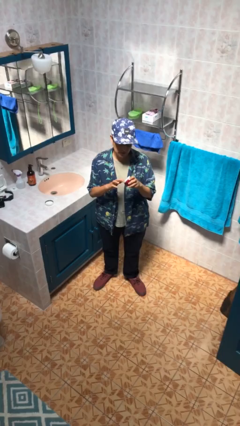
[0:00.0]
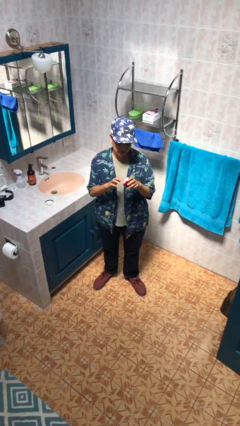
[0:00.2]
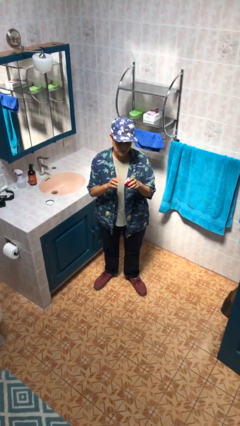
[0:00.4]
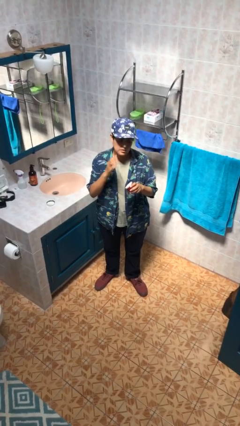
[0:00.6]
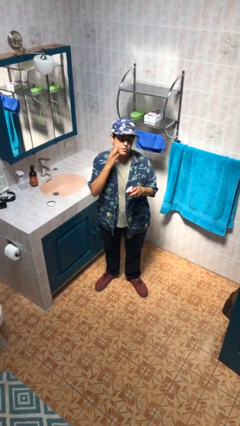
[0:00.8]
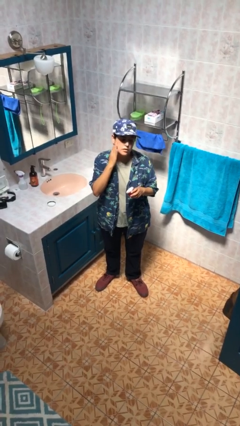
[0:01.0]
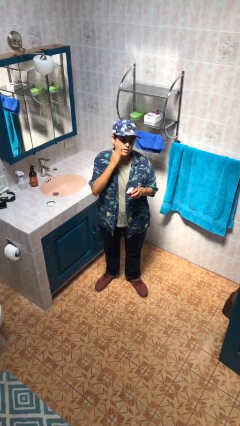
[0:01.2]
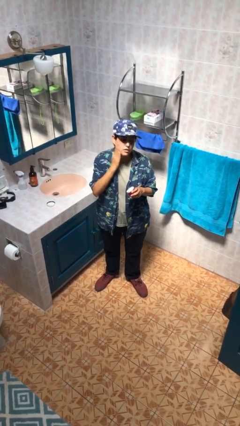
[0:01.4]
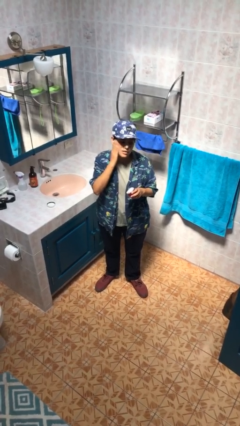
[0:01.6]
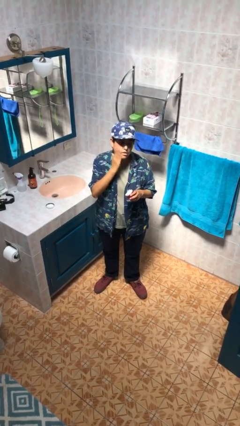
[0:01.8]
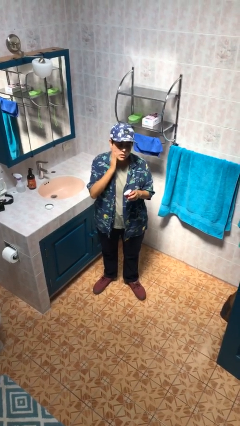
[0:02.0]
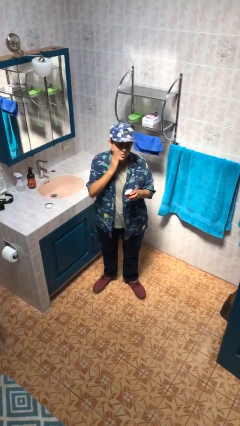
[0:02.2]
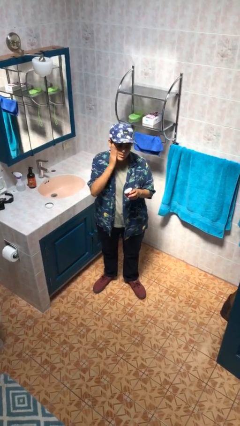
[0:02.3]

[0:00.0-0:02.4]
person applies facial moisturizer

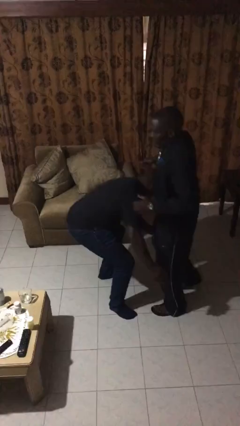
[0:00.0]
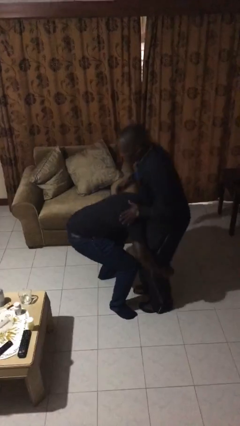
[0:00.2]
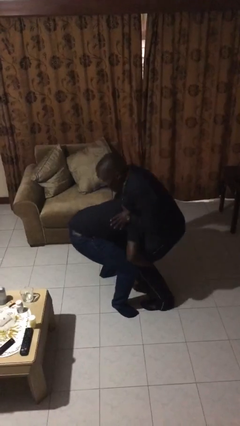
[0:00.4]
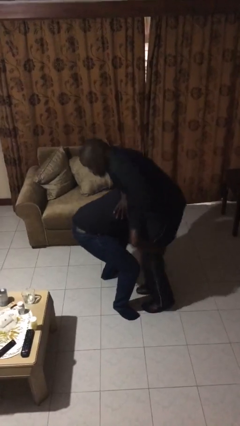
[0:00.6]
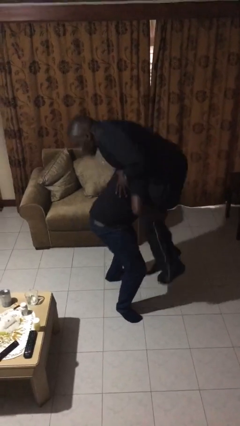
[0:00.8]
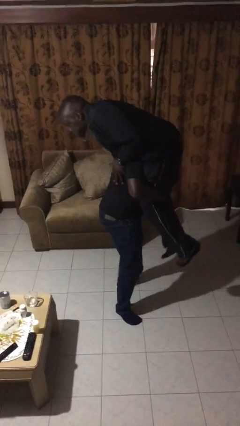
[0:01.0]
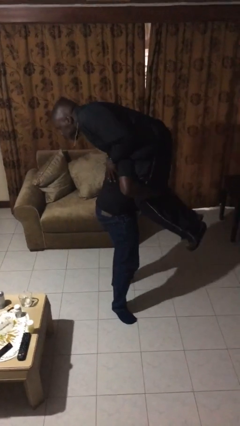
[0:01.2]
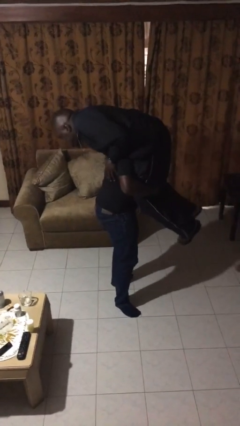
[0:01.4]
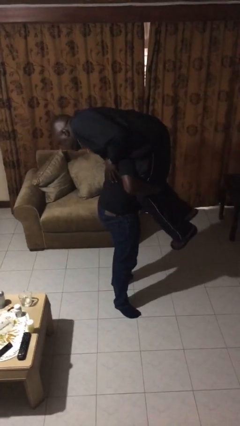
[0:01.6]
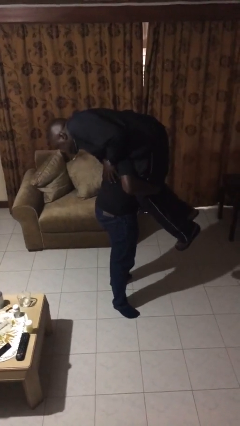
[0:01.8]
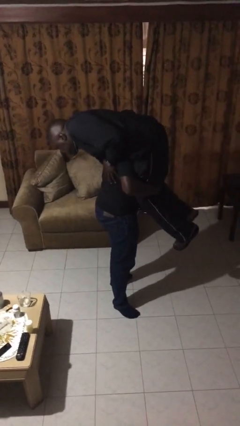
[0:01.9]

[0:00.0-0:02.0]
person carries person over shoulder

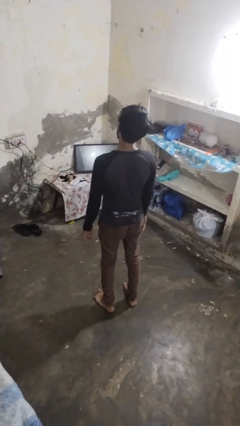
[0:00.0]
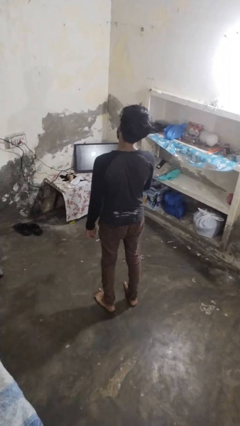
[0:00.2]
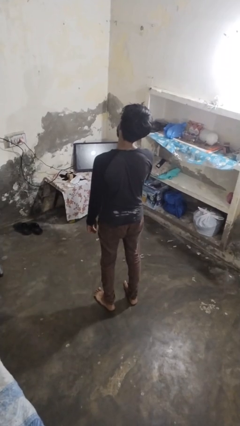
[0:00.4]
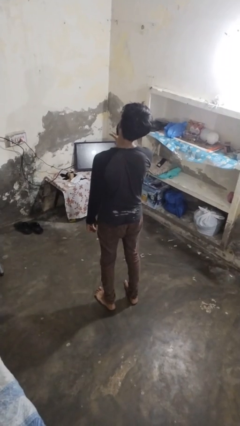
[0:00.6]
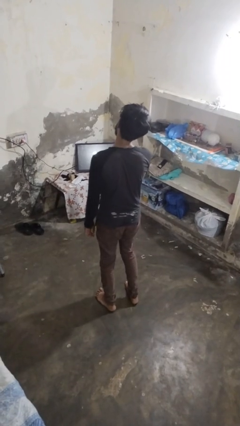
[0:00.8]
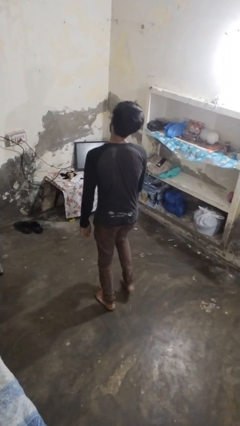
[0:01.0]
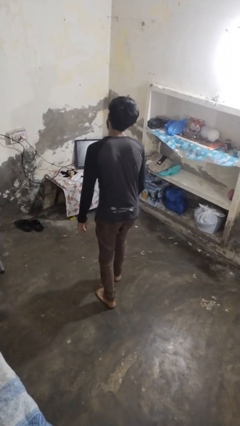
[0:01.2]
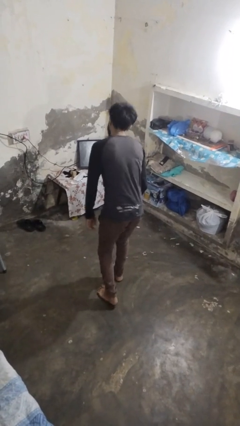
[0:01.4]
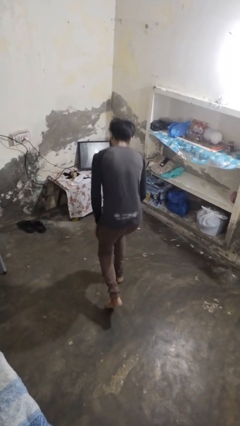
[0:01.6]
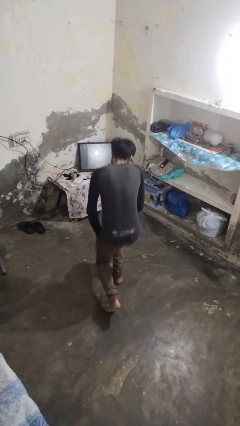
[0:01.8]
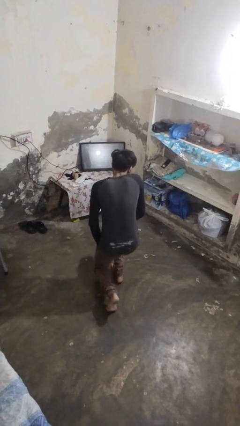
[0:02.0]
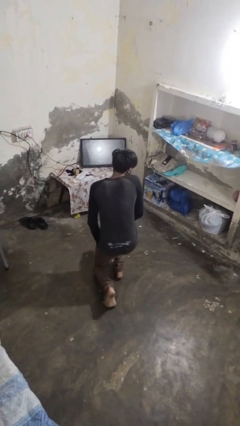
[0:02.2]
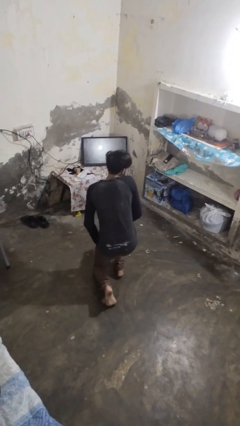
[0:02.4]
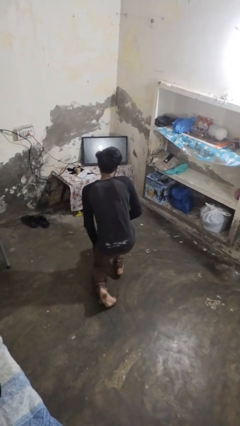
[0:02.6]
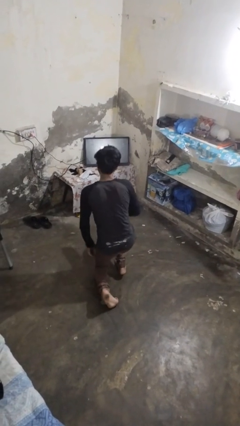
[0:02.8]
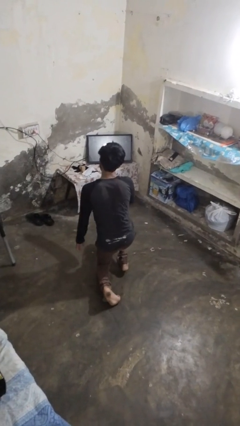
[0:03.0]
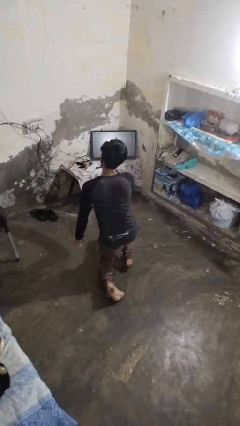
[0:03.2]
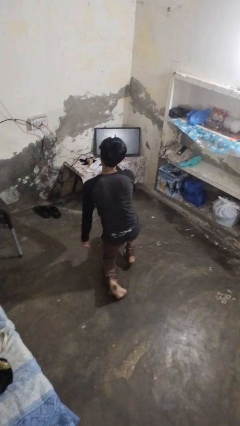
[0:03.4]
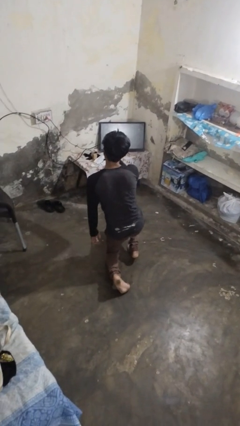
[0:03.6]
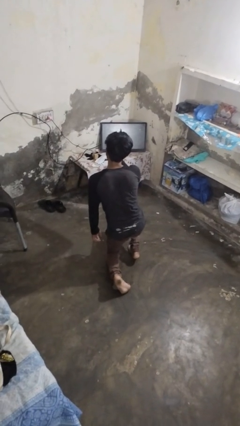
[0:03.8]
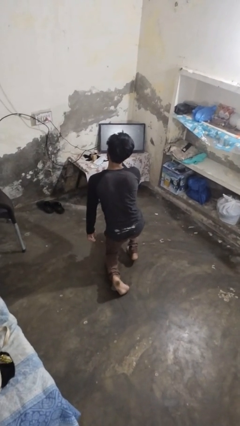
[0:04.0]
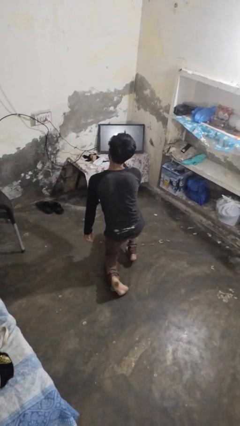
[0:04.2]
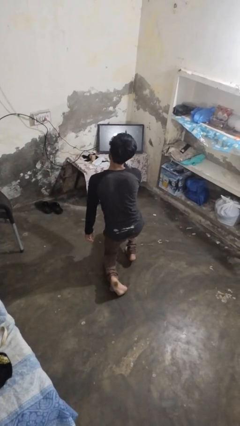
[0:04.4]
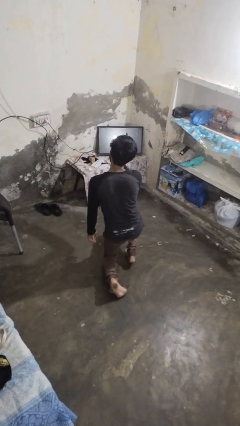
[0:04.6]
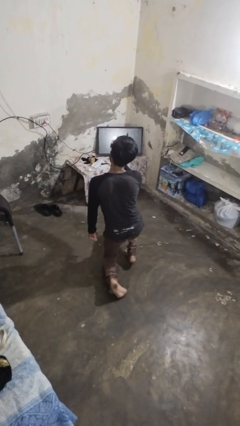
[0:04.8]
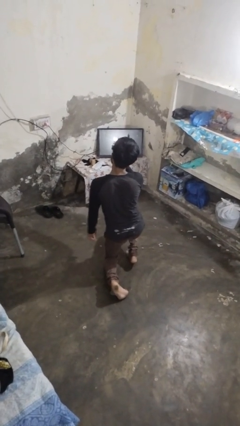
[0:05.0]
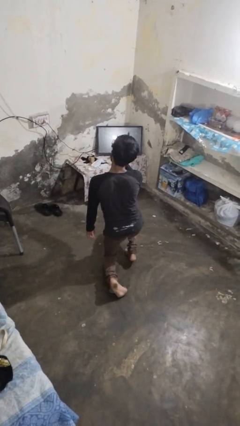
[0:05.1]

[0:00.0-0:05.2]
person kneels

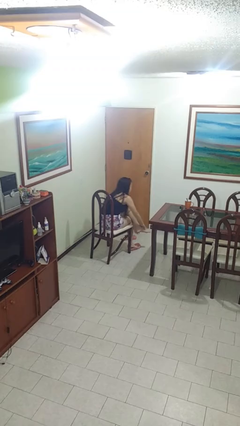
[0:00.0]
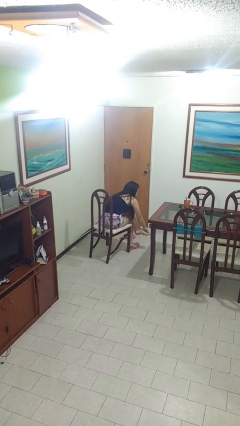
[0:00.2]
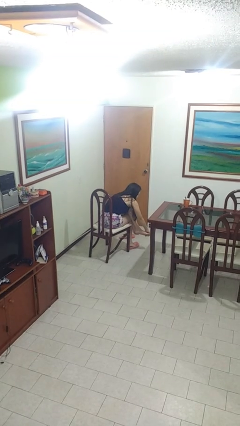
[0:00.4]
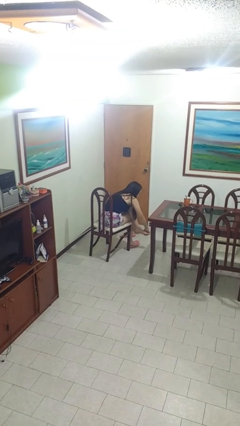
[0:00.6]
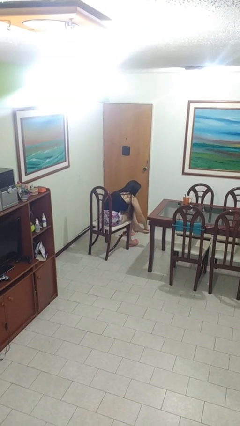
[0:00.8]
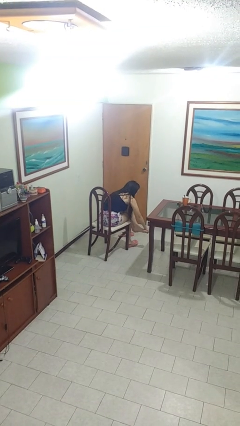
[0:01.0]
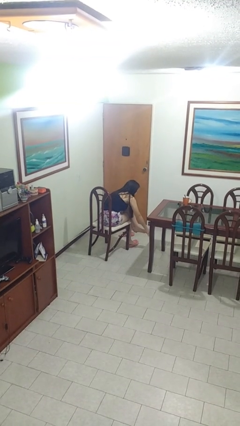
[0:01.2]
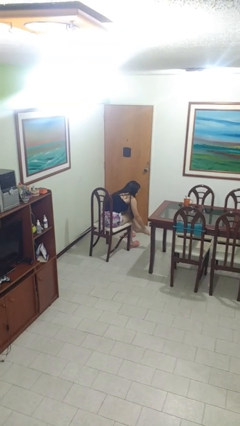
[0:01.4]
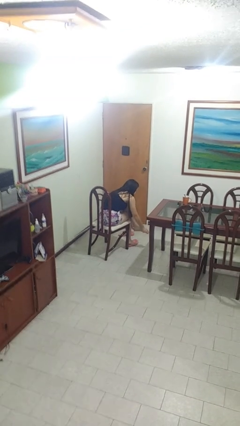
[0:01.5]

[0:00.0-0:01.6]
person rubs foot

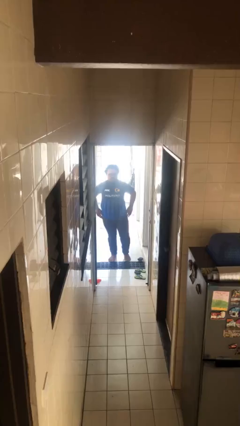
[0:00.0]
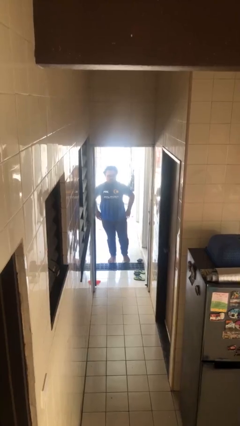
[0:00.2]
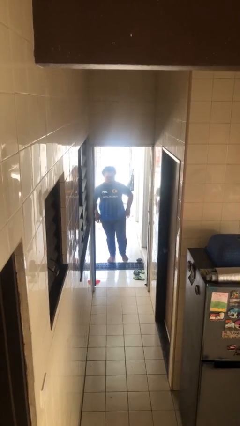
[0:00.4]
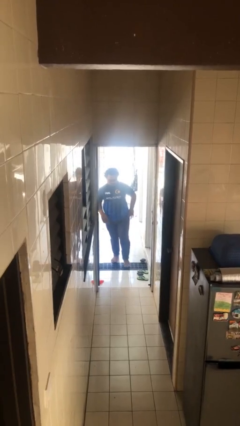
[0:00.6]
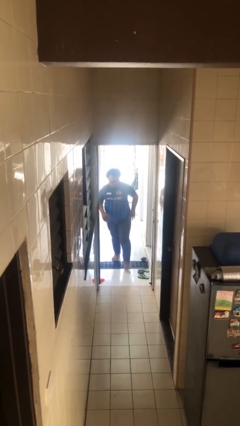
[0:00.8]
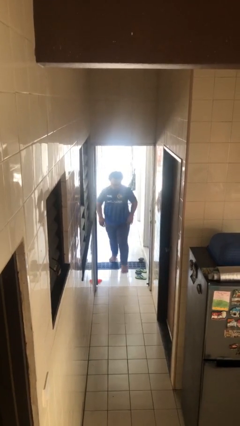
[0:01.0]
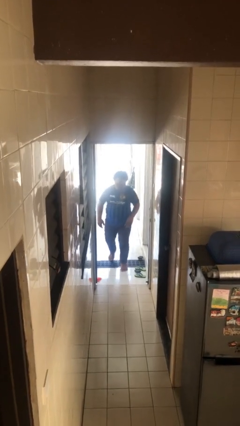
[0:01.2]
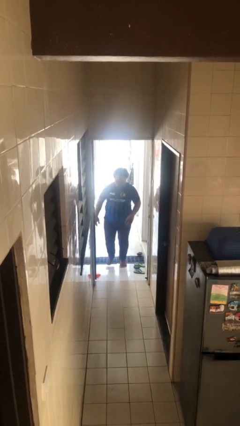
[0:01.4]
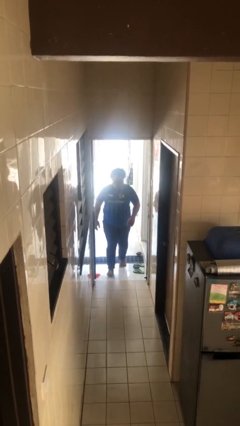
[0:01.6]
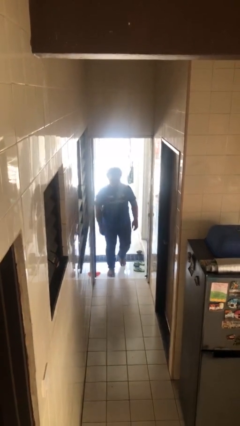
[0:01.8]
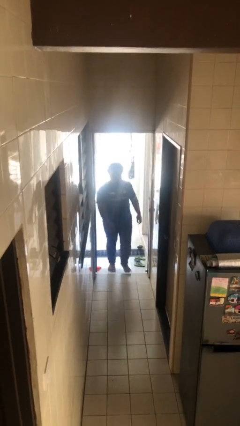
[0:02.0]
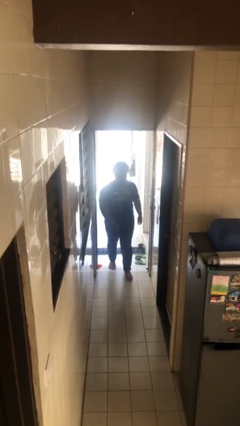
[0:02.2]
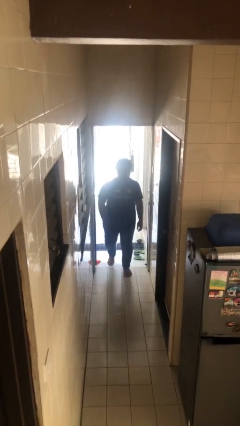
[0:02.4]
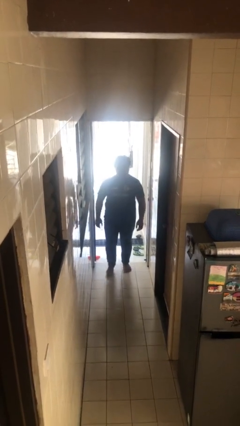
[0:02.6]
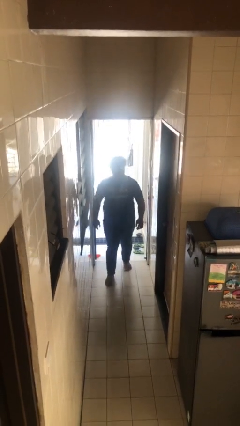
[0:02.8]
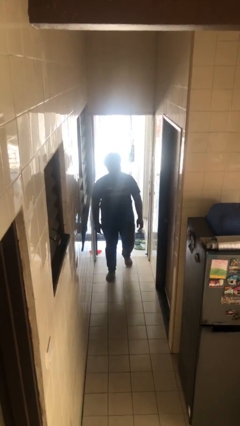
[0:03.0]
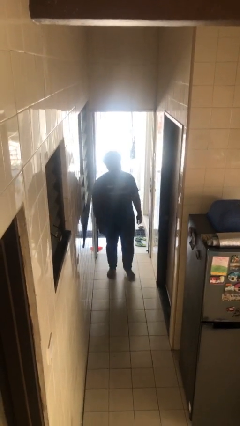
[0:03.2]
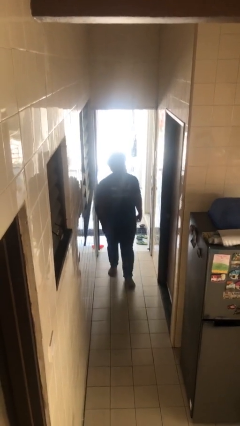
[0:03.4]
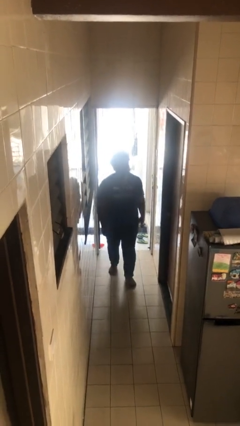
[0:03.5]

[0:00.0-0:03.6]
person enters scene through structure

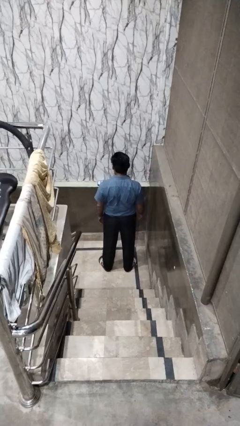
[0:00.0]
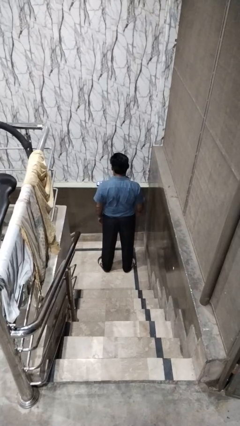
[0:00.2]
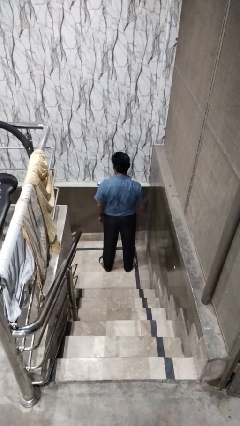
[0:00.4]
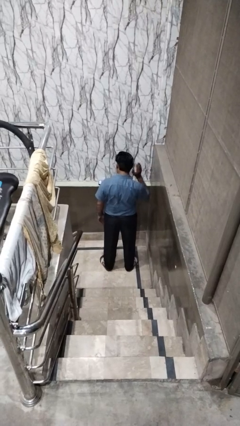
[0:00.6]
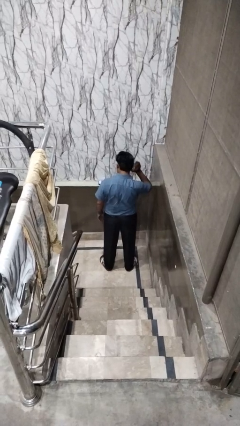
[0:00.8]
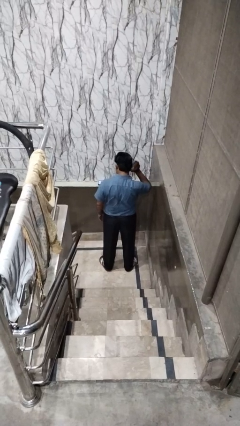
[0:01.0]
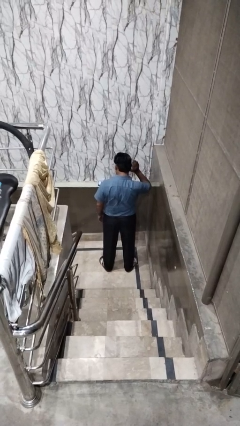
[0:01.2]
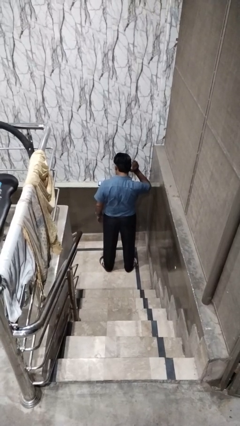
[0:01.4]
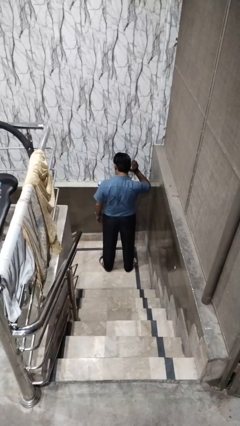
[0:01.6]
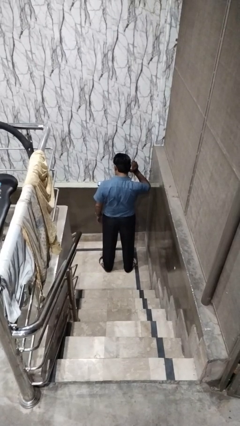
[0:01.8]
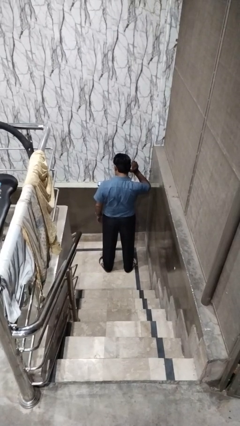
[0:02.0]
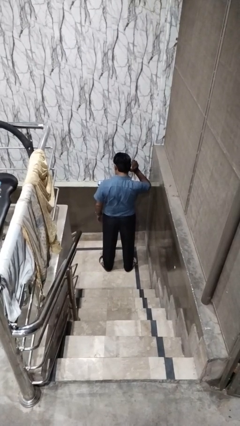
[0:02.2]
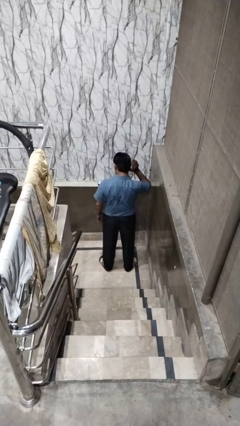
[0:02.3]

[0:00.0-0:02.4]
person gestures listen closely
